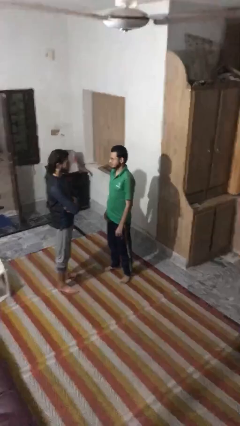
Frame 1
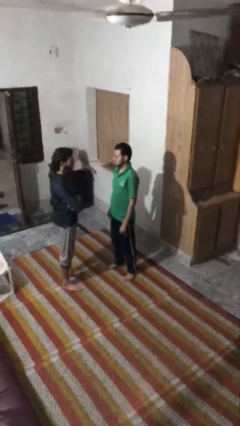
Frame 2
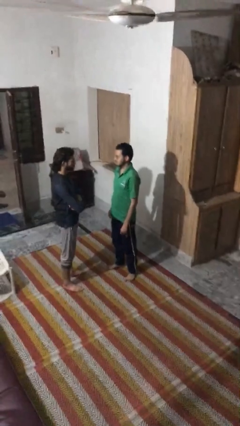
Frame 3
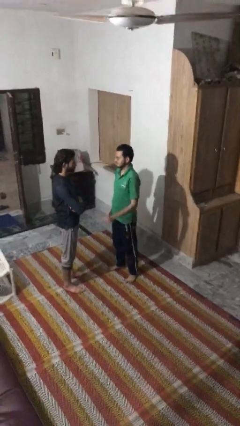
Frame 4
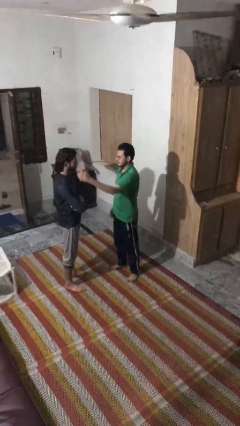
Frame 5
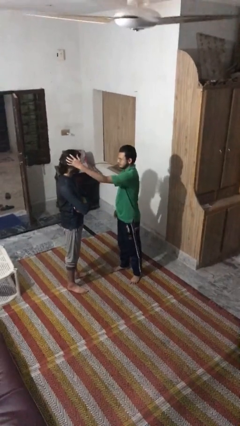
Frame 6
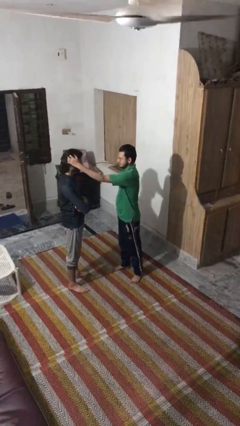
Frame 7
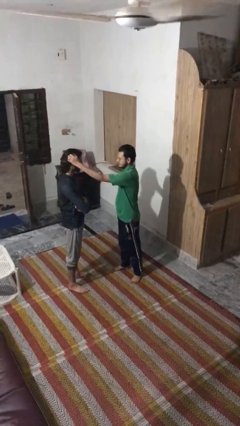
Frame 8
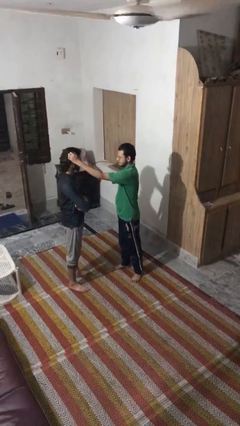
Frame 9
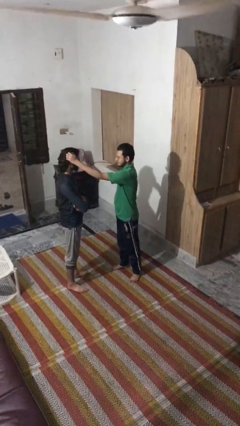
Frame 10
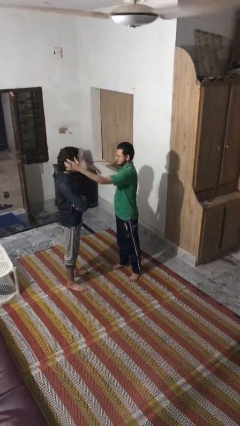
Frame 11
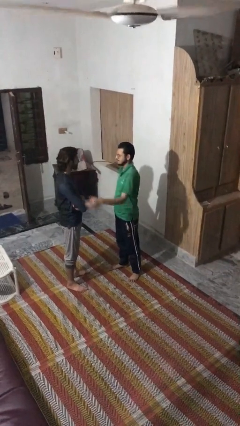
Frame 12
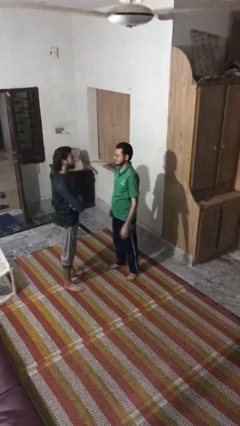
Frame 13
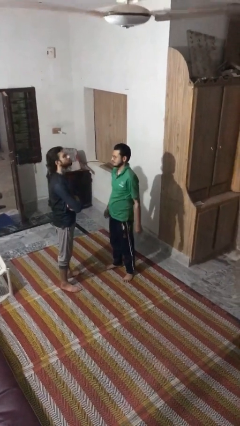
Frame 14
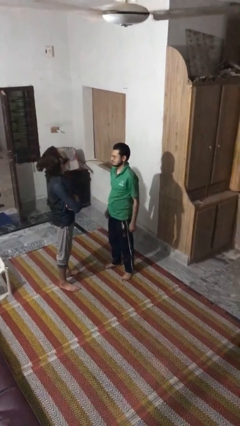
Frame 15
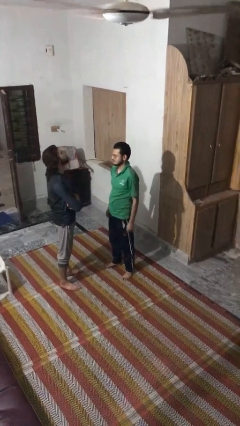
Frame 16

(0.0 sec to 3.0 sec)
person grabs person by hair

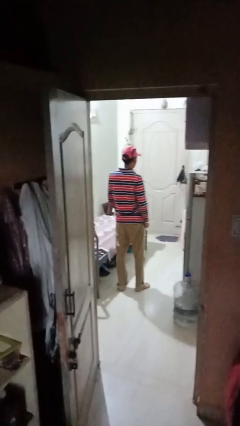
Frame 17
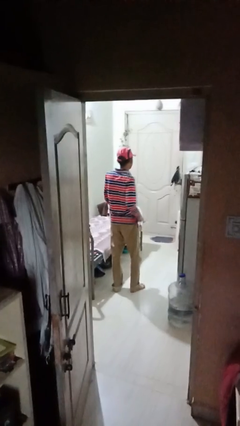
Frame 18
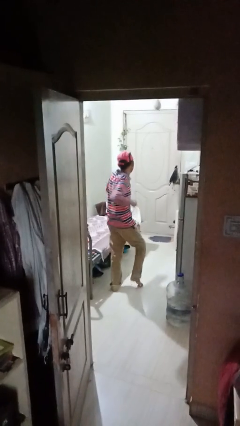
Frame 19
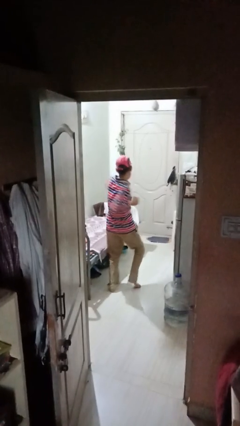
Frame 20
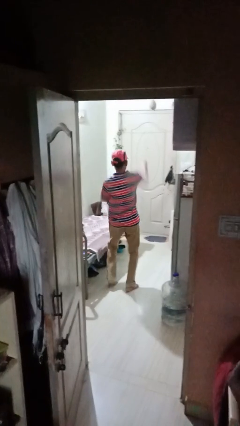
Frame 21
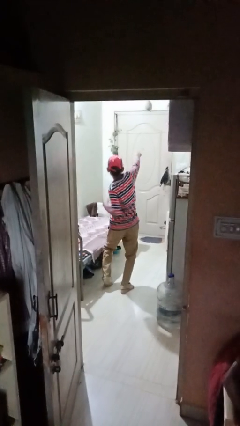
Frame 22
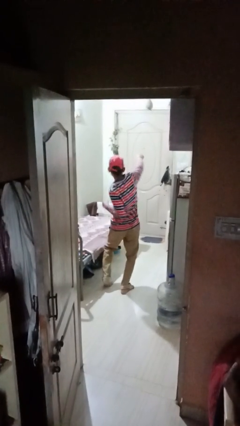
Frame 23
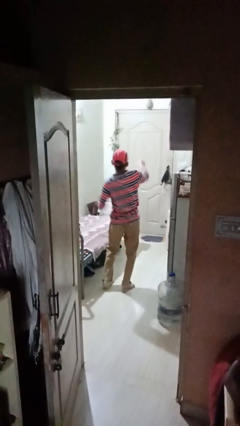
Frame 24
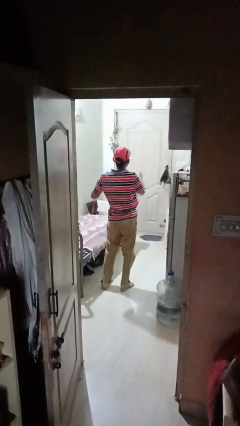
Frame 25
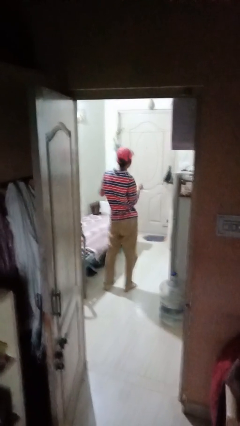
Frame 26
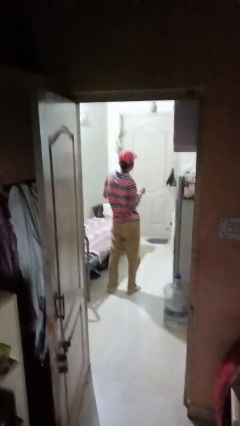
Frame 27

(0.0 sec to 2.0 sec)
person punches

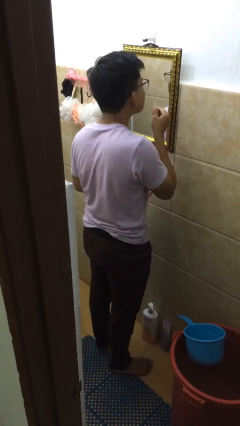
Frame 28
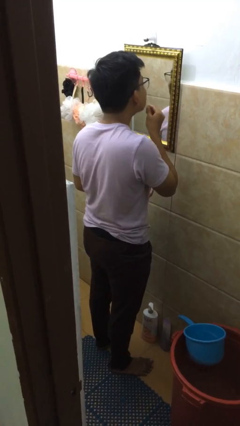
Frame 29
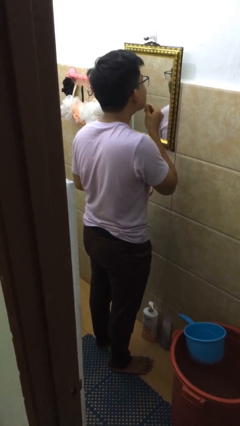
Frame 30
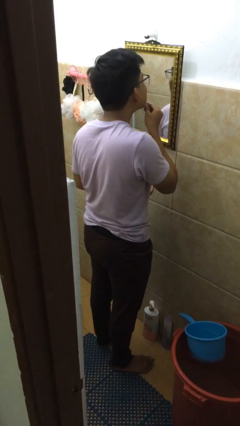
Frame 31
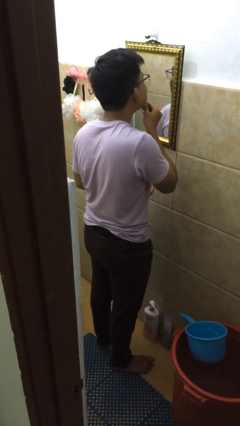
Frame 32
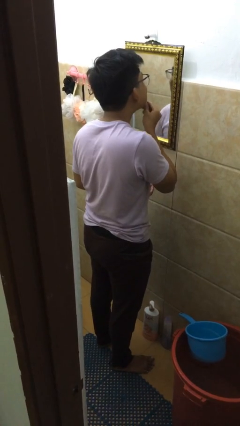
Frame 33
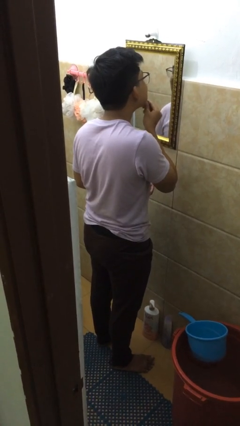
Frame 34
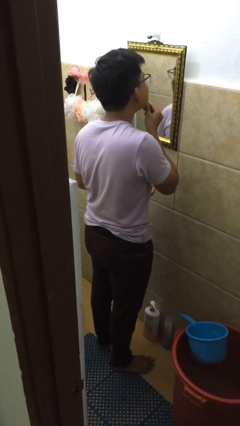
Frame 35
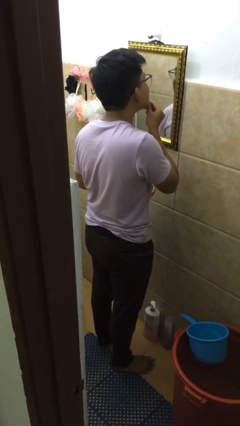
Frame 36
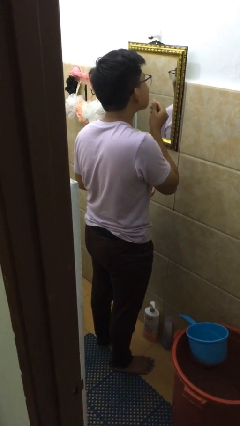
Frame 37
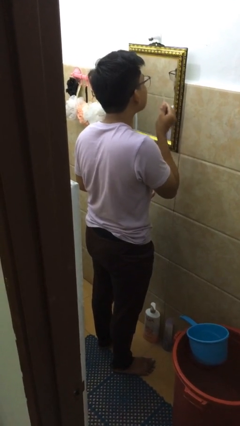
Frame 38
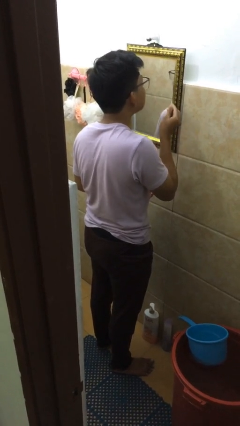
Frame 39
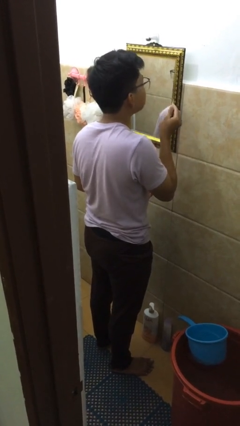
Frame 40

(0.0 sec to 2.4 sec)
person flosses

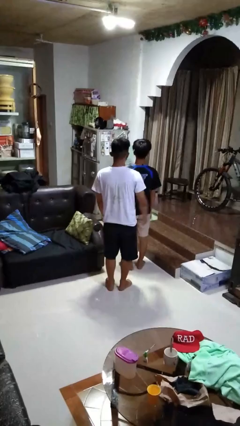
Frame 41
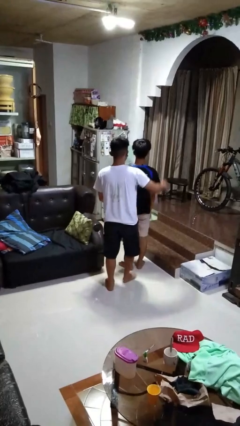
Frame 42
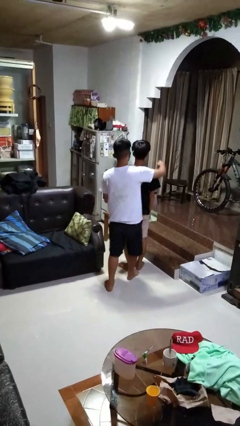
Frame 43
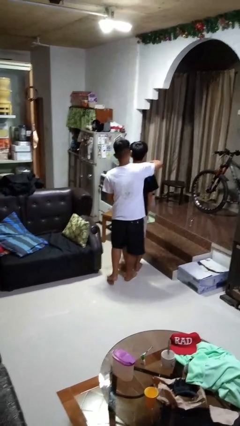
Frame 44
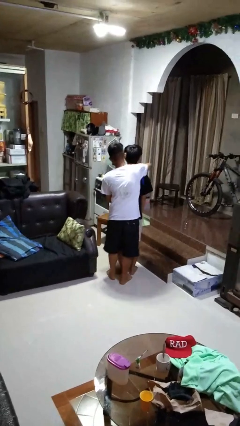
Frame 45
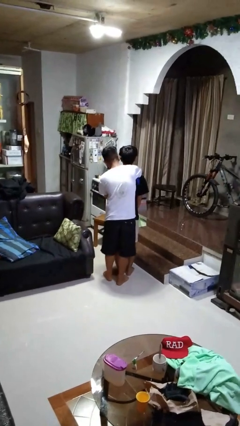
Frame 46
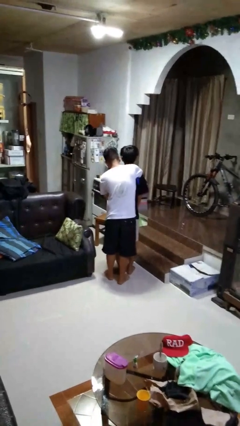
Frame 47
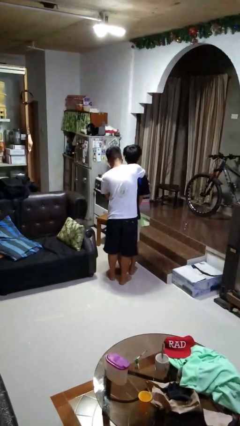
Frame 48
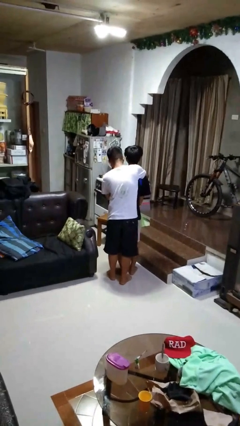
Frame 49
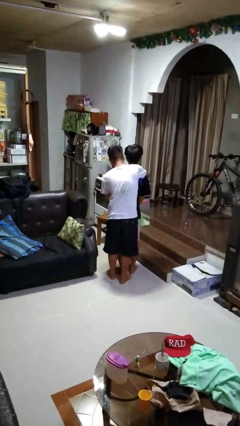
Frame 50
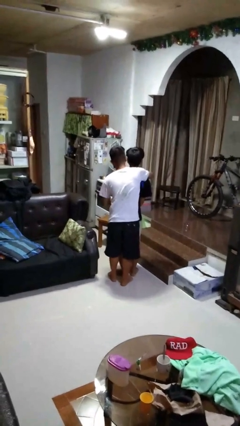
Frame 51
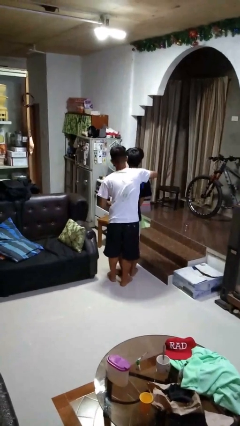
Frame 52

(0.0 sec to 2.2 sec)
person hugs person from behind

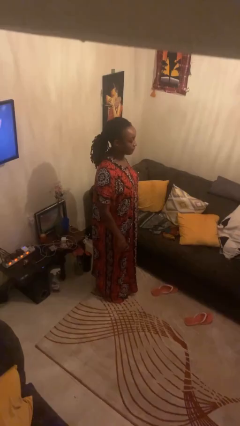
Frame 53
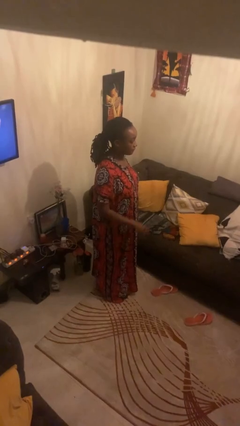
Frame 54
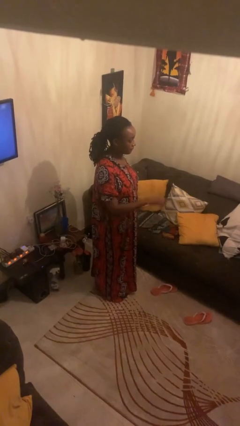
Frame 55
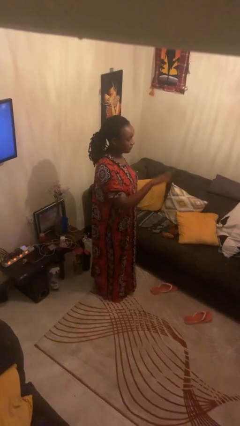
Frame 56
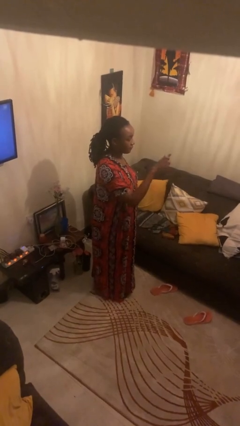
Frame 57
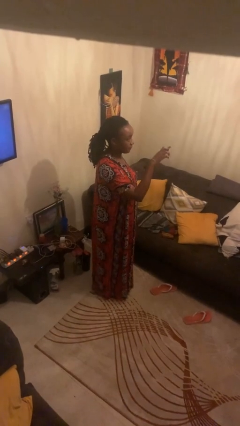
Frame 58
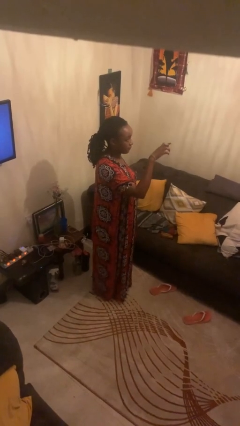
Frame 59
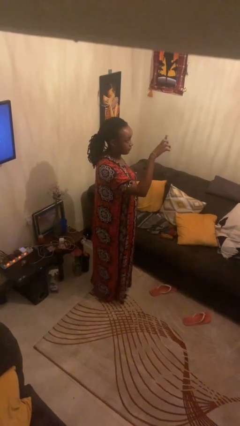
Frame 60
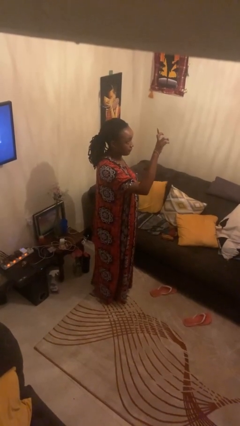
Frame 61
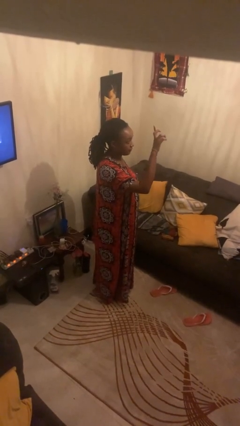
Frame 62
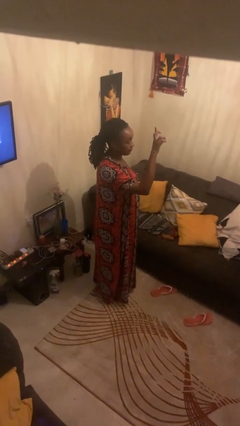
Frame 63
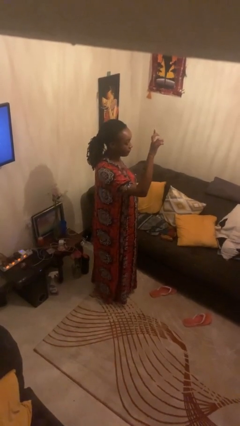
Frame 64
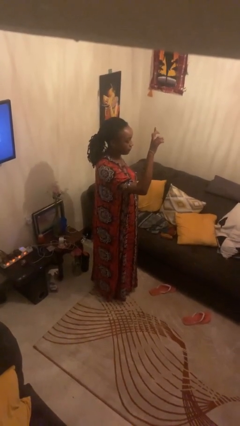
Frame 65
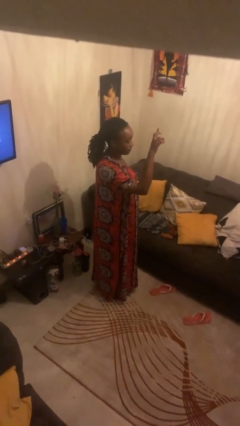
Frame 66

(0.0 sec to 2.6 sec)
person gestures swipe up

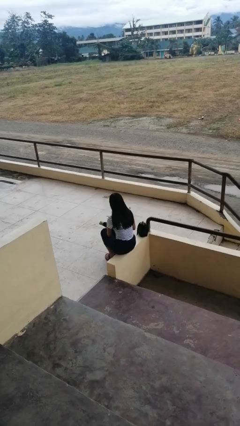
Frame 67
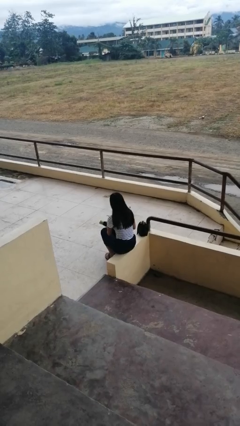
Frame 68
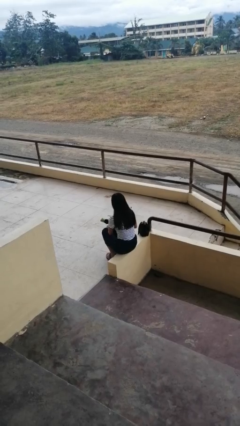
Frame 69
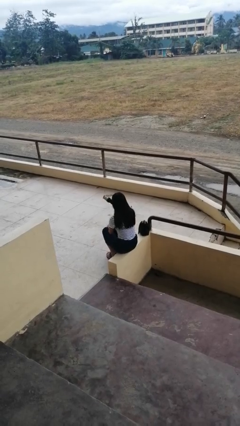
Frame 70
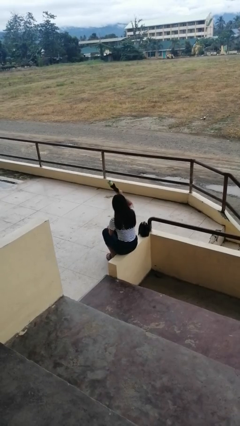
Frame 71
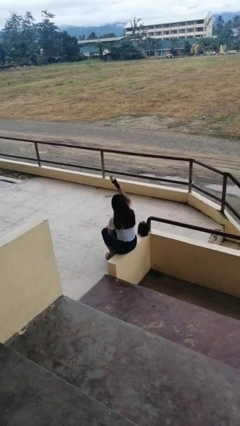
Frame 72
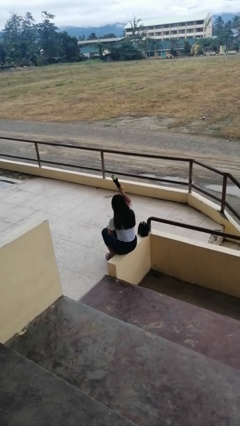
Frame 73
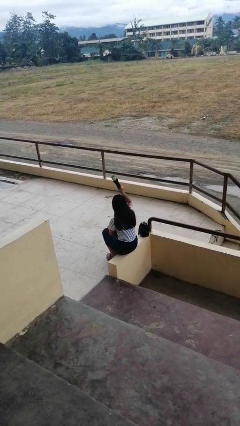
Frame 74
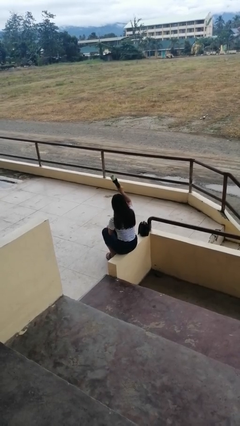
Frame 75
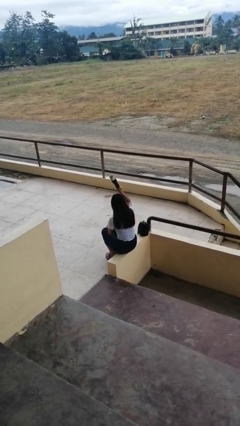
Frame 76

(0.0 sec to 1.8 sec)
person holds object above head

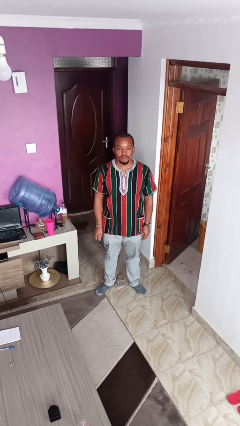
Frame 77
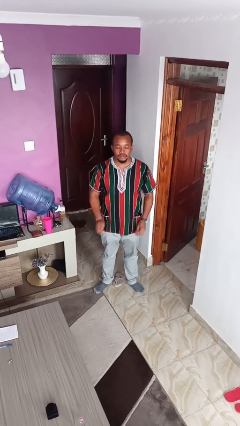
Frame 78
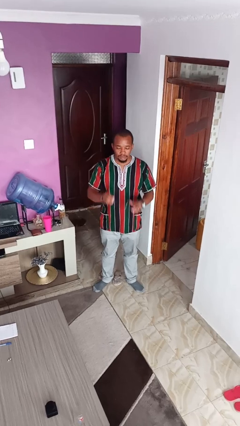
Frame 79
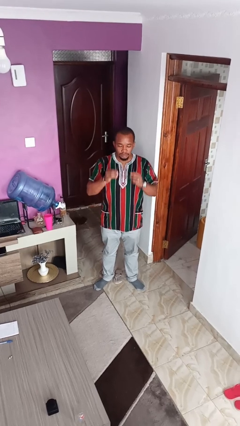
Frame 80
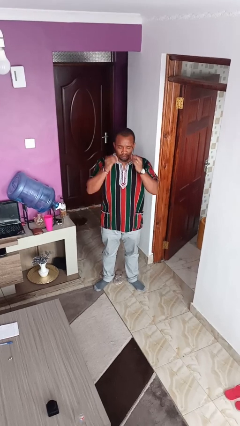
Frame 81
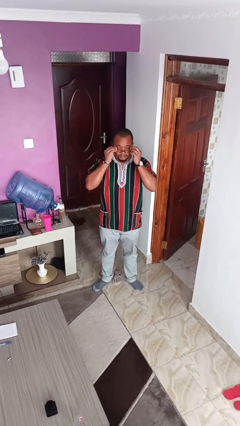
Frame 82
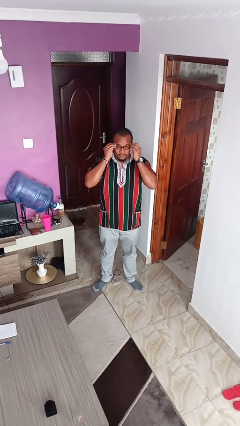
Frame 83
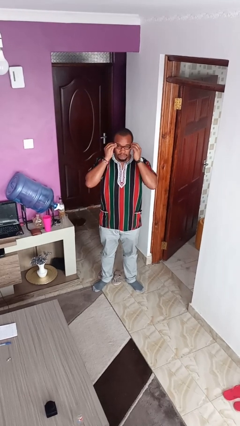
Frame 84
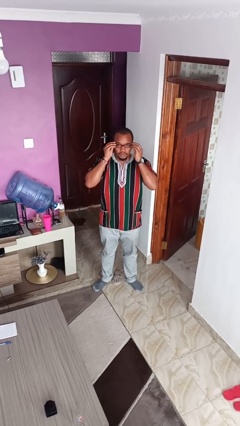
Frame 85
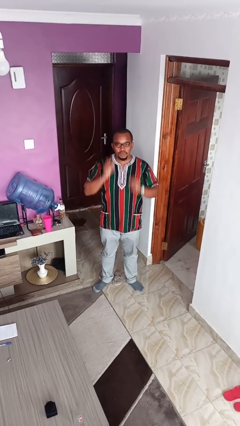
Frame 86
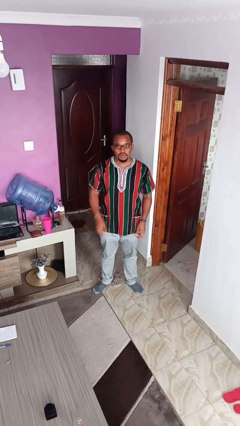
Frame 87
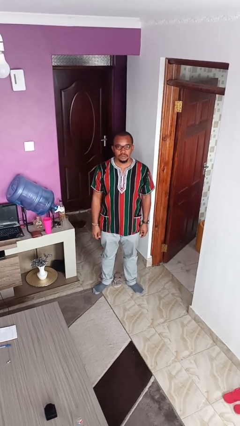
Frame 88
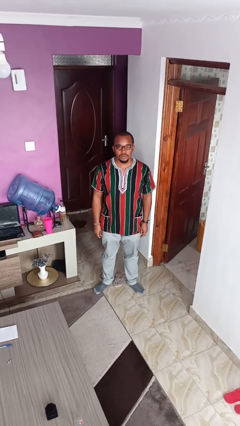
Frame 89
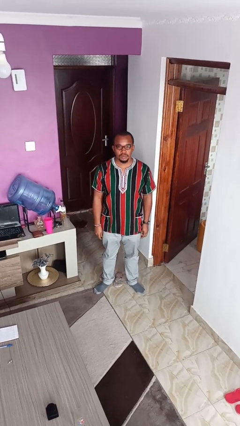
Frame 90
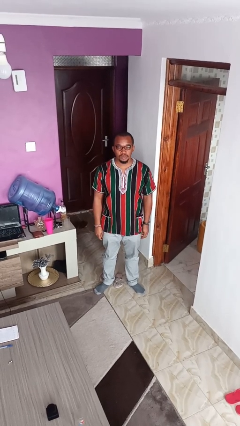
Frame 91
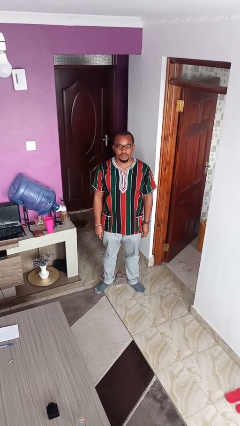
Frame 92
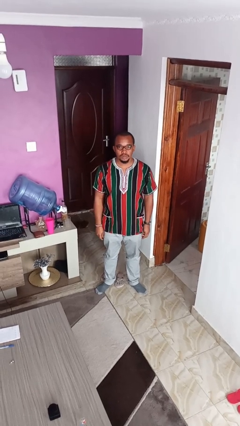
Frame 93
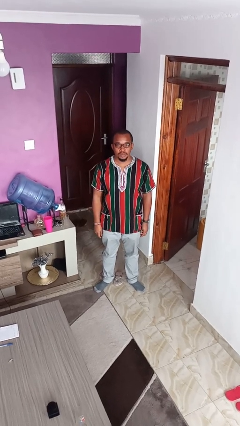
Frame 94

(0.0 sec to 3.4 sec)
person puts on glasses
